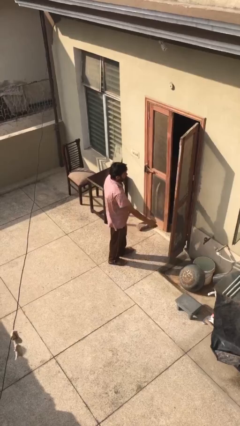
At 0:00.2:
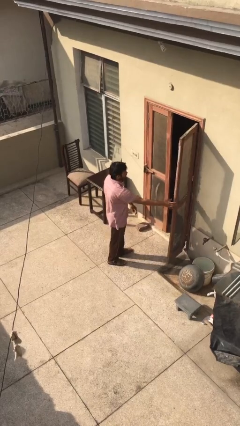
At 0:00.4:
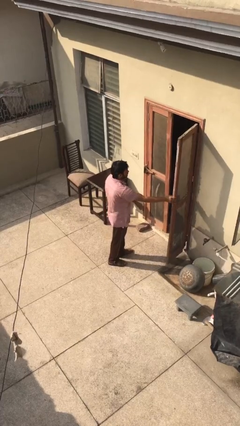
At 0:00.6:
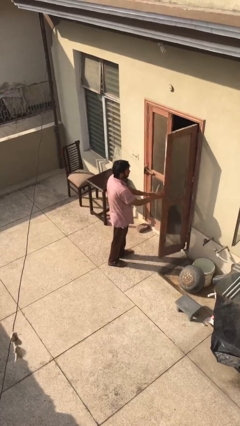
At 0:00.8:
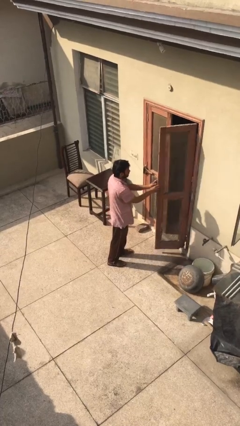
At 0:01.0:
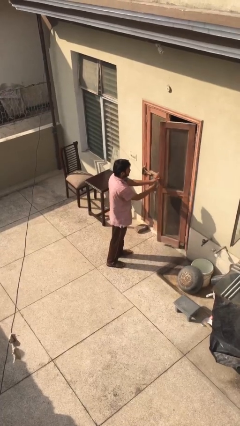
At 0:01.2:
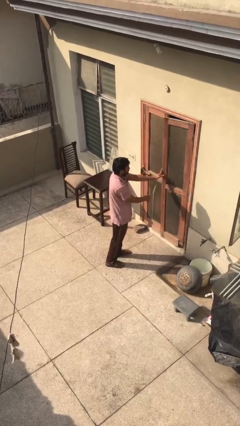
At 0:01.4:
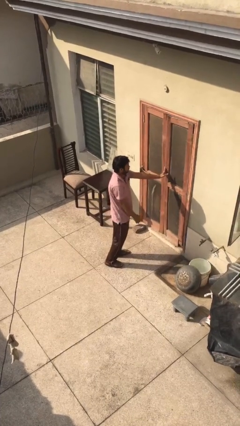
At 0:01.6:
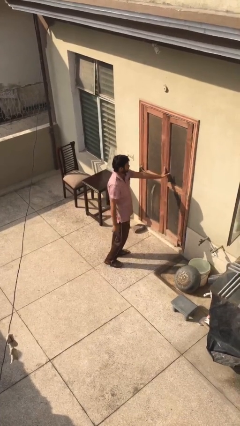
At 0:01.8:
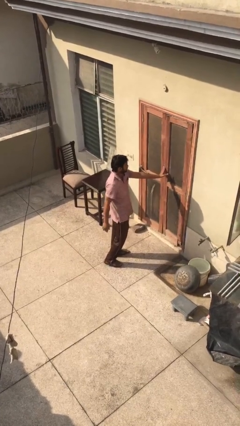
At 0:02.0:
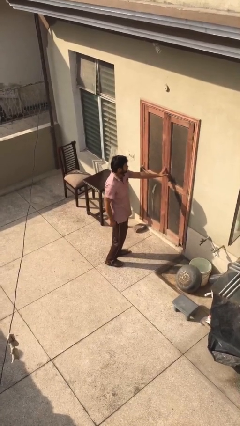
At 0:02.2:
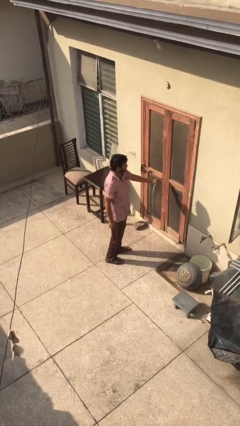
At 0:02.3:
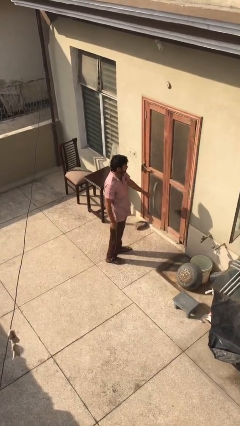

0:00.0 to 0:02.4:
person closes facility door

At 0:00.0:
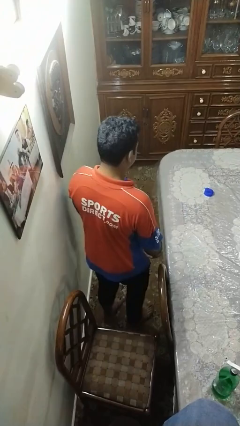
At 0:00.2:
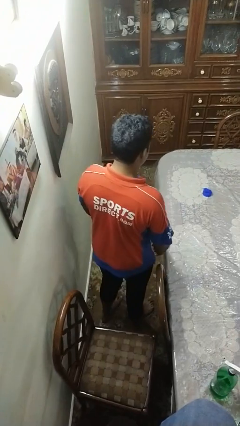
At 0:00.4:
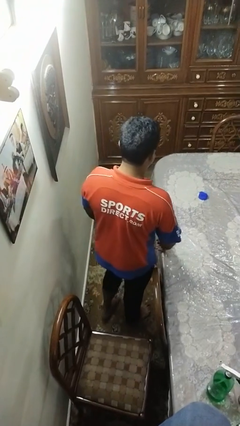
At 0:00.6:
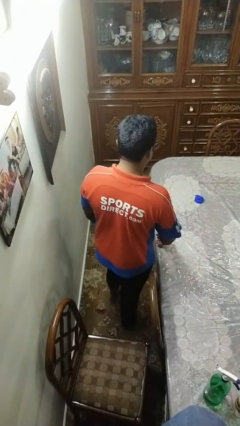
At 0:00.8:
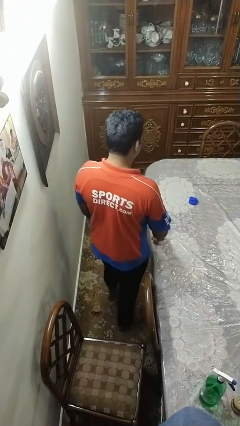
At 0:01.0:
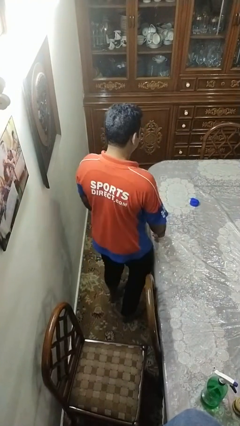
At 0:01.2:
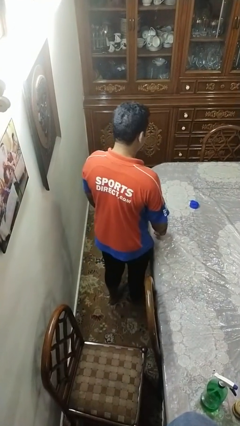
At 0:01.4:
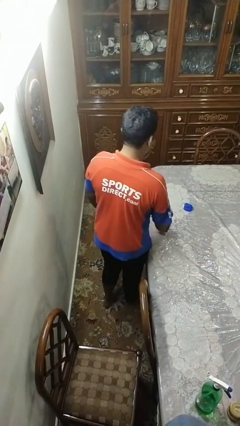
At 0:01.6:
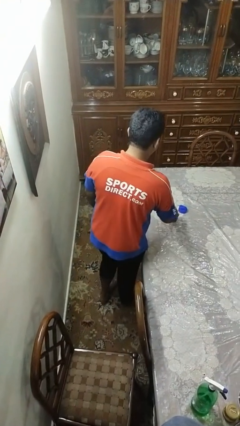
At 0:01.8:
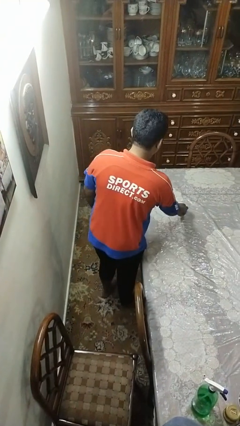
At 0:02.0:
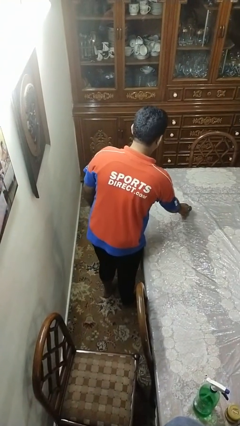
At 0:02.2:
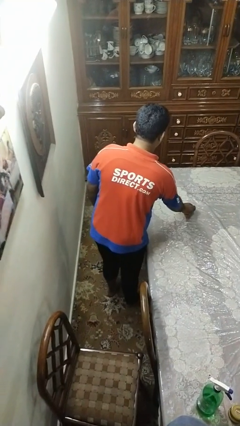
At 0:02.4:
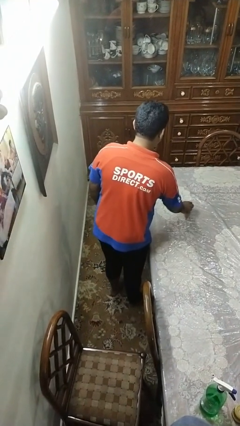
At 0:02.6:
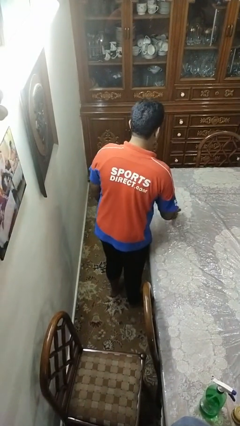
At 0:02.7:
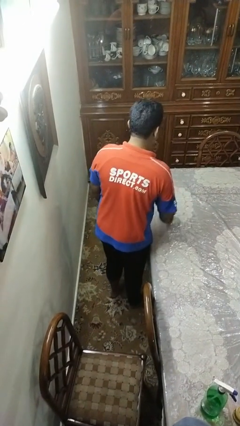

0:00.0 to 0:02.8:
person picks up object from table

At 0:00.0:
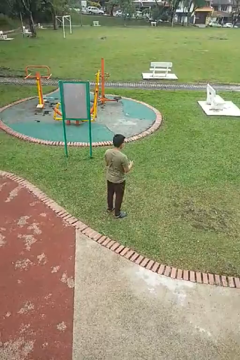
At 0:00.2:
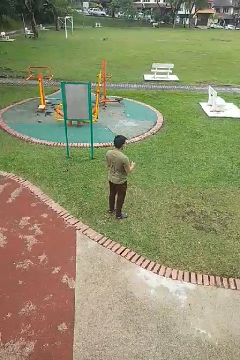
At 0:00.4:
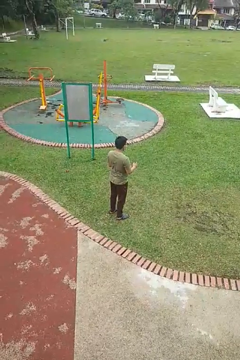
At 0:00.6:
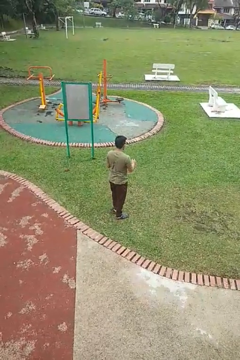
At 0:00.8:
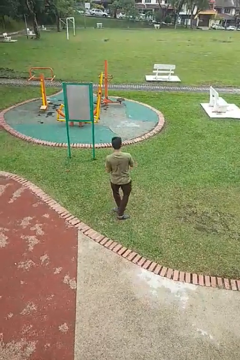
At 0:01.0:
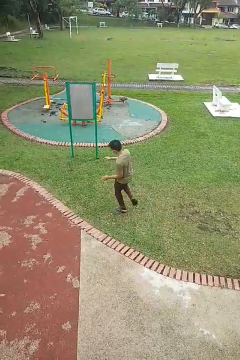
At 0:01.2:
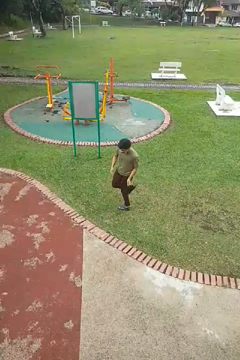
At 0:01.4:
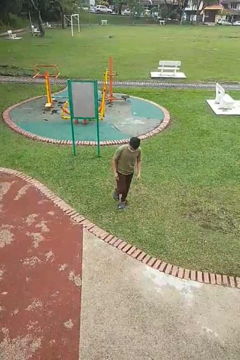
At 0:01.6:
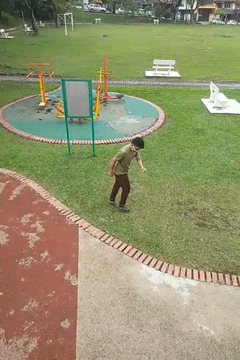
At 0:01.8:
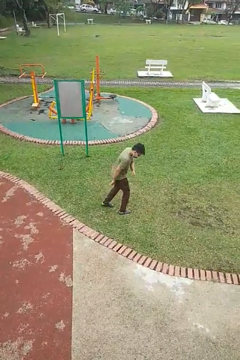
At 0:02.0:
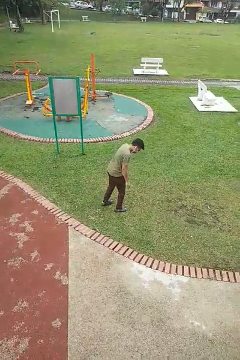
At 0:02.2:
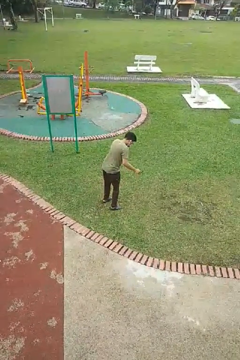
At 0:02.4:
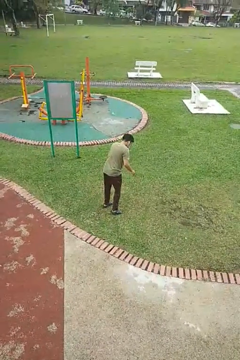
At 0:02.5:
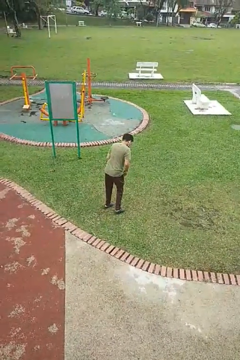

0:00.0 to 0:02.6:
person twirls

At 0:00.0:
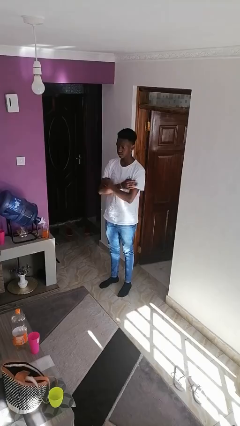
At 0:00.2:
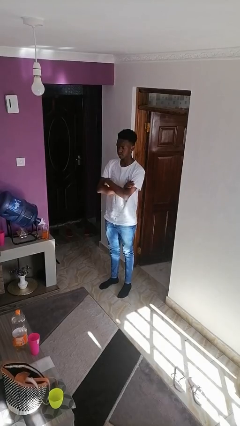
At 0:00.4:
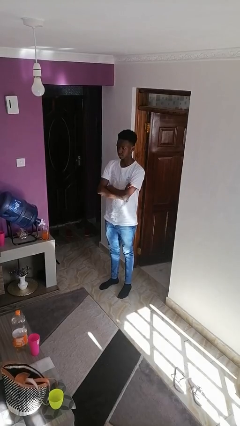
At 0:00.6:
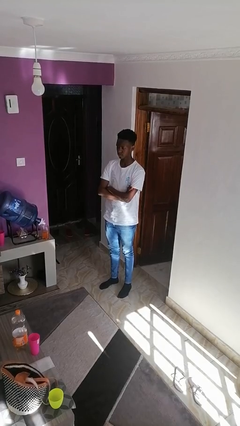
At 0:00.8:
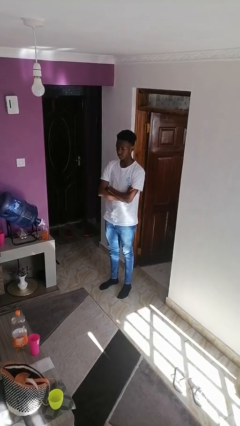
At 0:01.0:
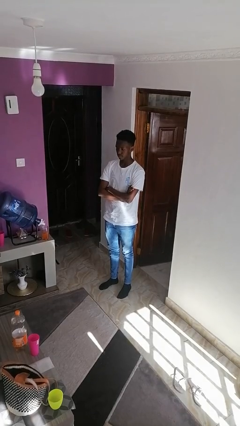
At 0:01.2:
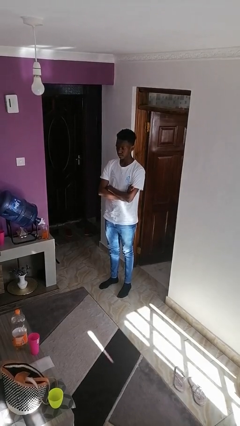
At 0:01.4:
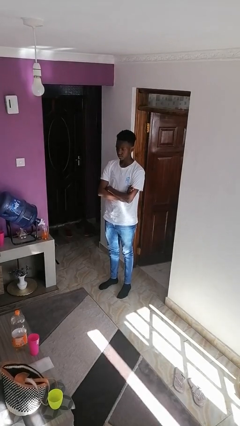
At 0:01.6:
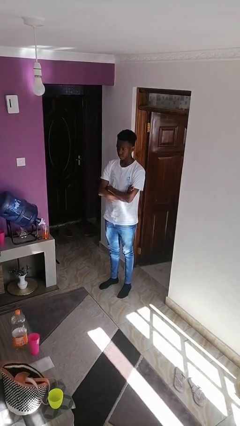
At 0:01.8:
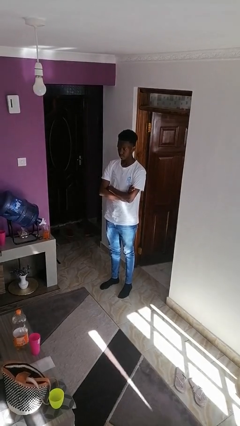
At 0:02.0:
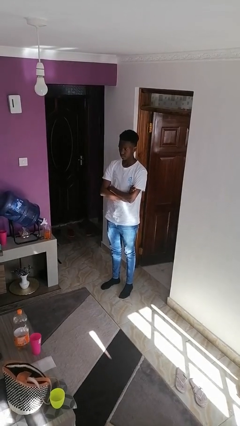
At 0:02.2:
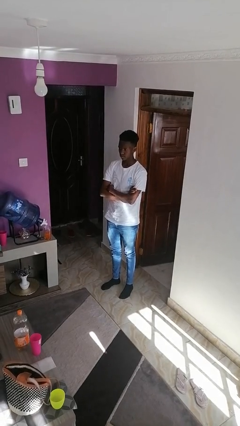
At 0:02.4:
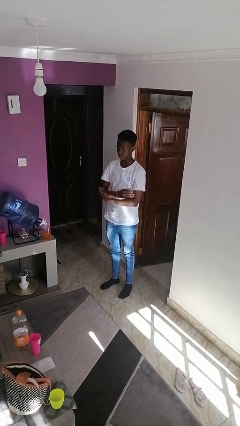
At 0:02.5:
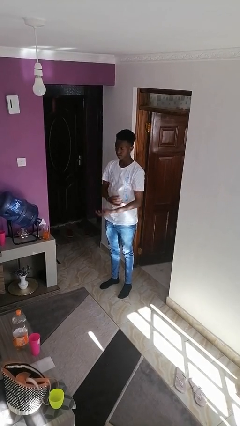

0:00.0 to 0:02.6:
person crosses arms

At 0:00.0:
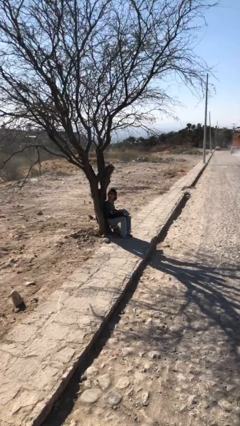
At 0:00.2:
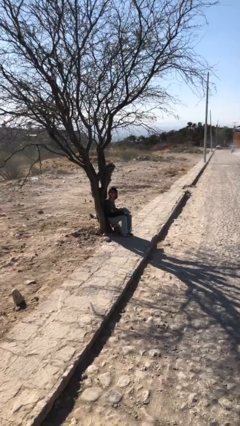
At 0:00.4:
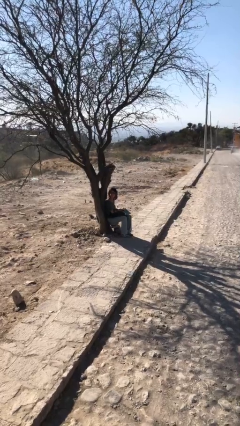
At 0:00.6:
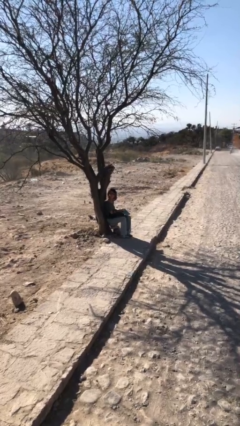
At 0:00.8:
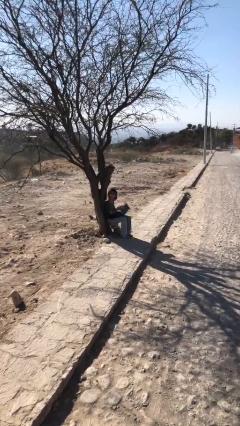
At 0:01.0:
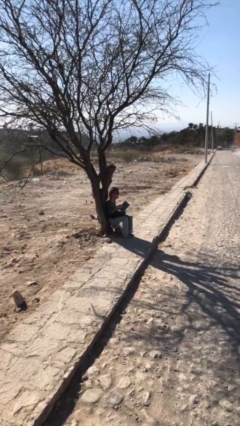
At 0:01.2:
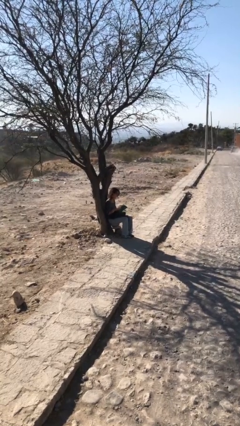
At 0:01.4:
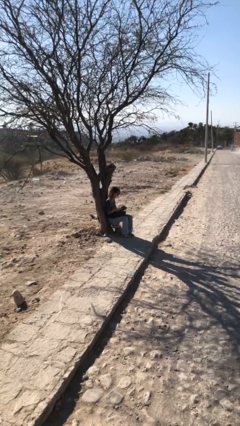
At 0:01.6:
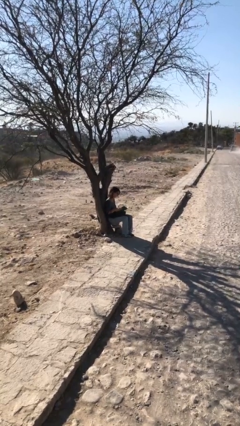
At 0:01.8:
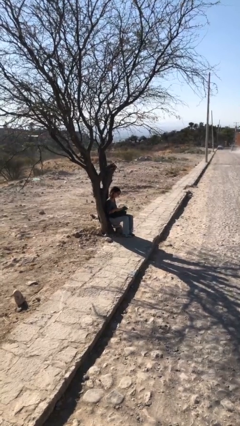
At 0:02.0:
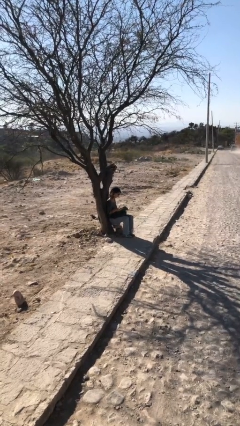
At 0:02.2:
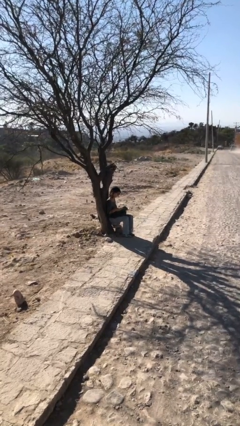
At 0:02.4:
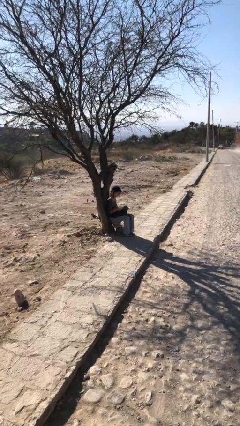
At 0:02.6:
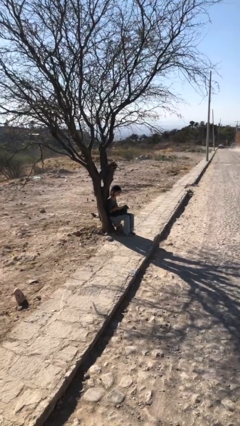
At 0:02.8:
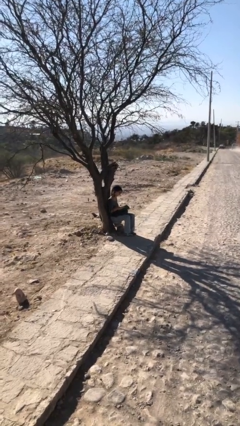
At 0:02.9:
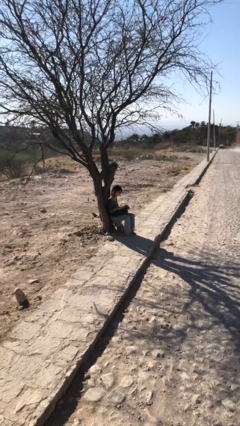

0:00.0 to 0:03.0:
person reads document

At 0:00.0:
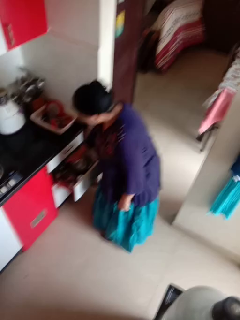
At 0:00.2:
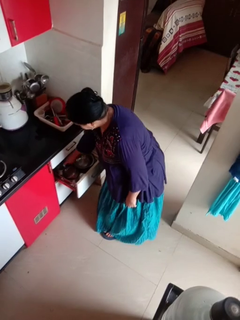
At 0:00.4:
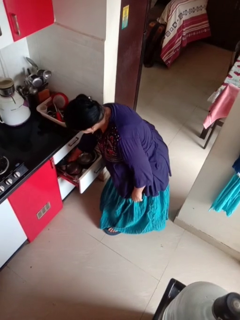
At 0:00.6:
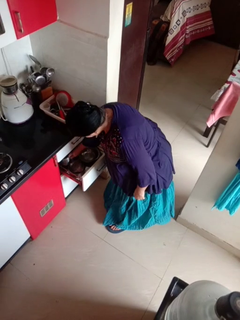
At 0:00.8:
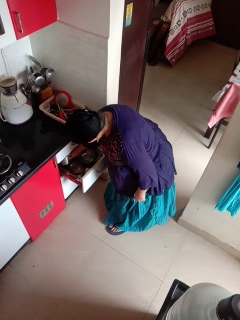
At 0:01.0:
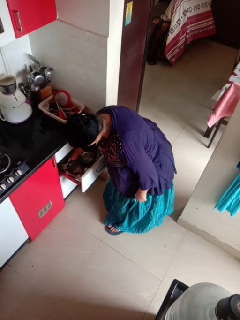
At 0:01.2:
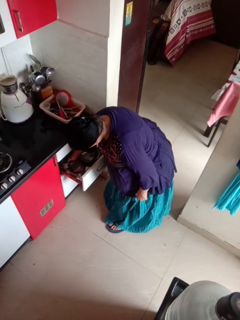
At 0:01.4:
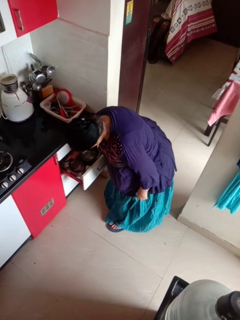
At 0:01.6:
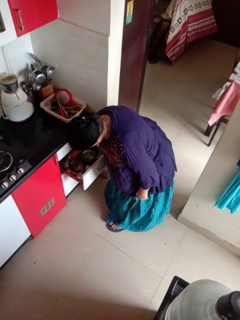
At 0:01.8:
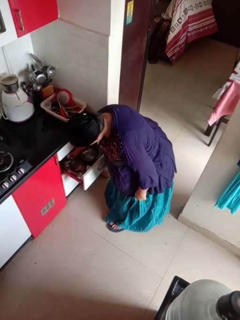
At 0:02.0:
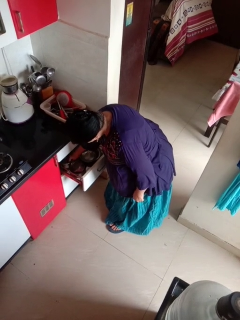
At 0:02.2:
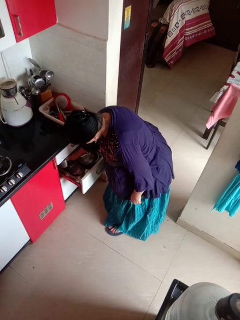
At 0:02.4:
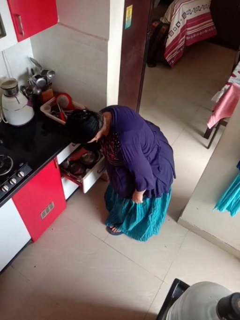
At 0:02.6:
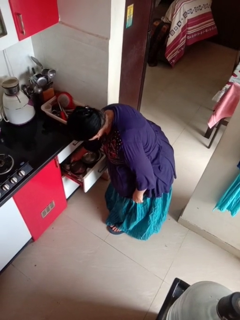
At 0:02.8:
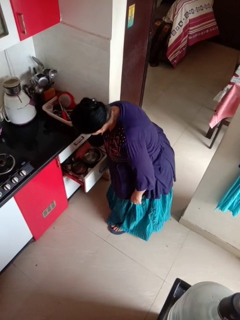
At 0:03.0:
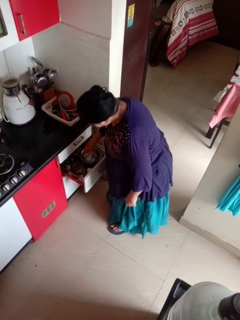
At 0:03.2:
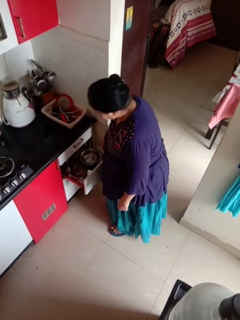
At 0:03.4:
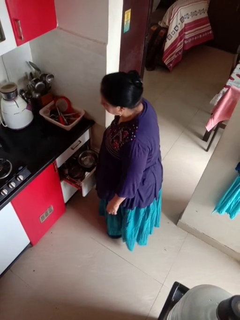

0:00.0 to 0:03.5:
person searches in kitchen drawer

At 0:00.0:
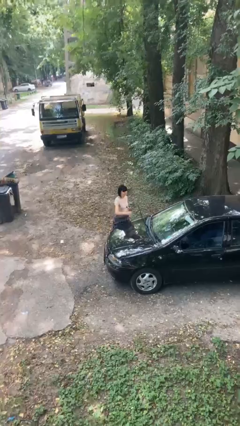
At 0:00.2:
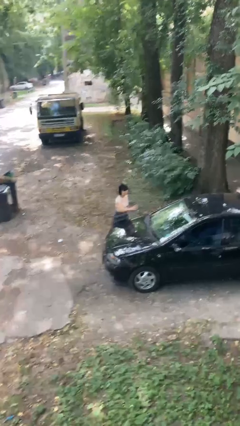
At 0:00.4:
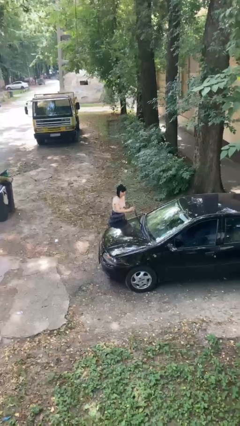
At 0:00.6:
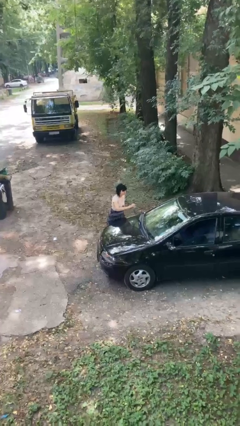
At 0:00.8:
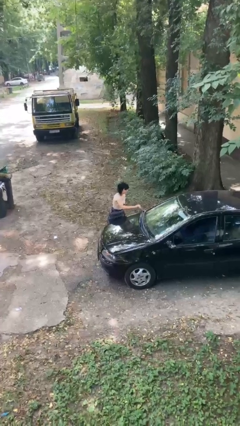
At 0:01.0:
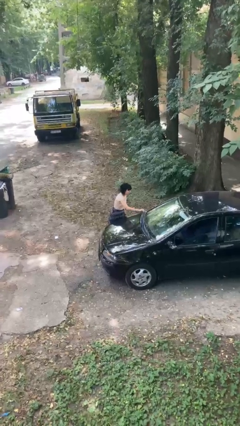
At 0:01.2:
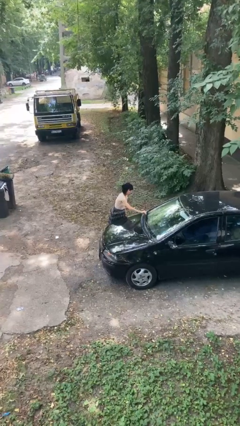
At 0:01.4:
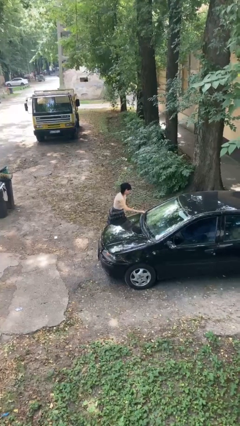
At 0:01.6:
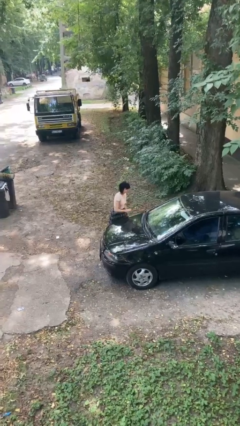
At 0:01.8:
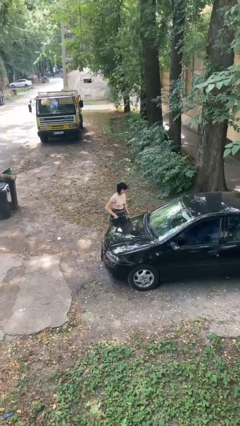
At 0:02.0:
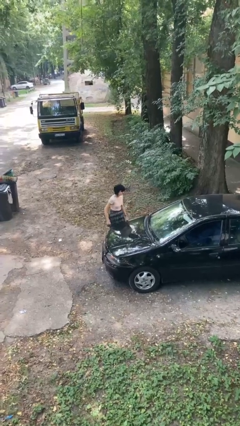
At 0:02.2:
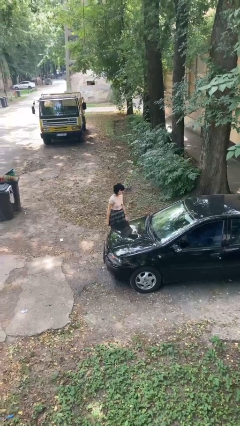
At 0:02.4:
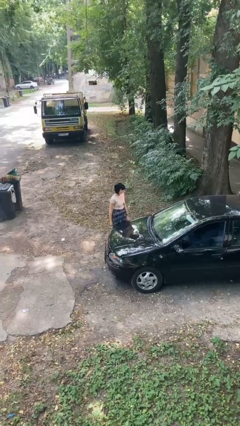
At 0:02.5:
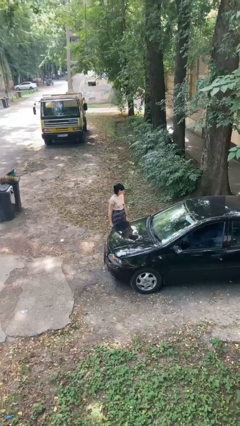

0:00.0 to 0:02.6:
person flips down car wipers
